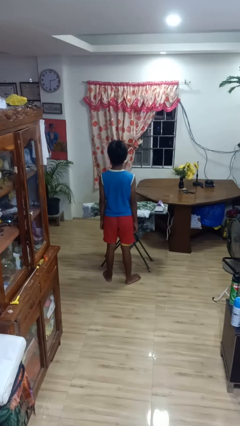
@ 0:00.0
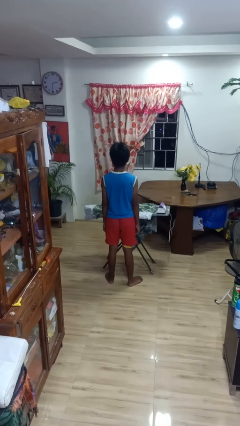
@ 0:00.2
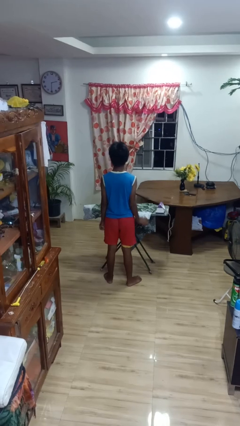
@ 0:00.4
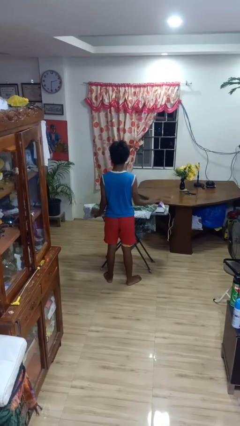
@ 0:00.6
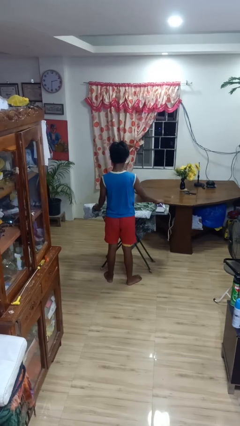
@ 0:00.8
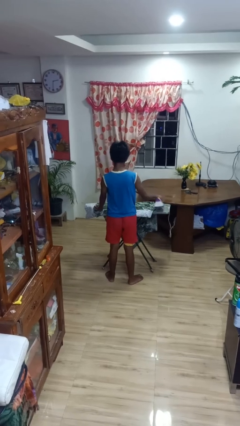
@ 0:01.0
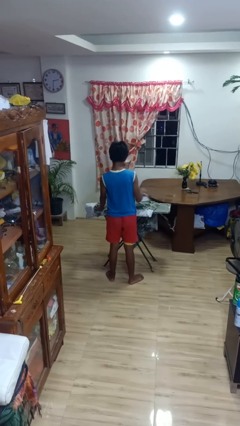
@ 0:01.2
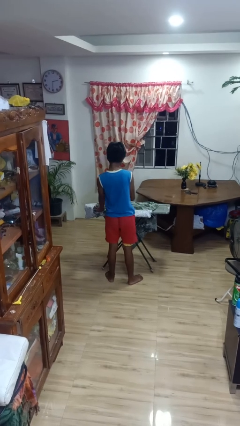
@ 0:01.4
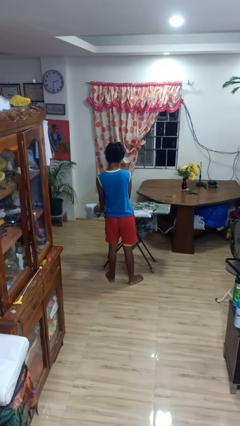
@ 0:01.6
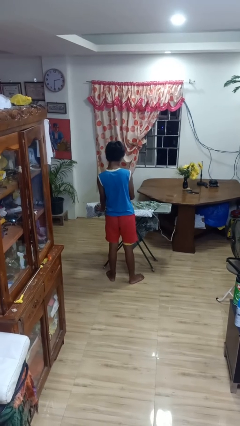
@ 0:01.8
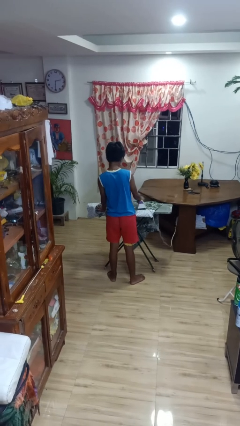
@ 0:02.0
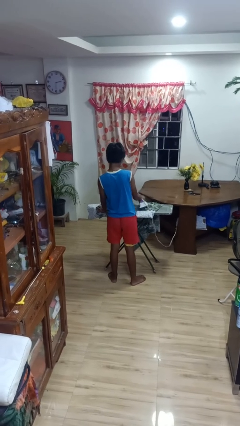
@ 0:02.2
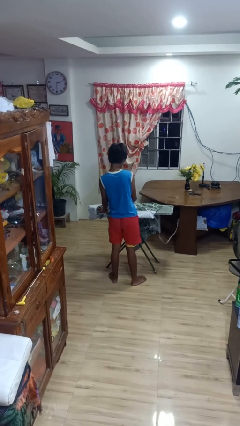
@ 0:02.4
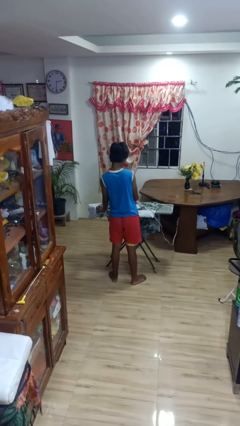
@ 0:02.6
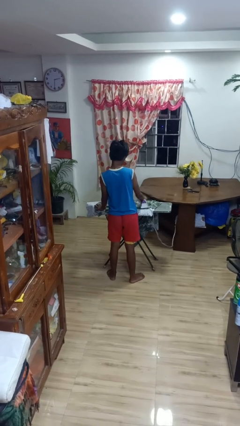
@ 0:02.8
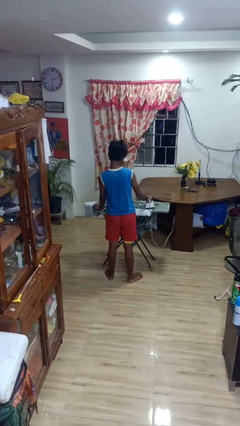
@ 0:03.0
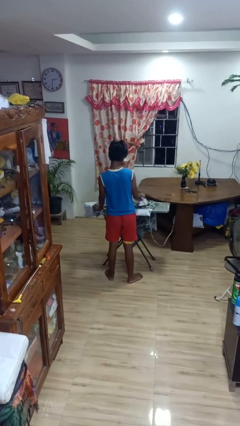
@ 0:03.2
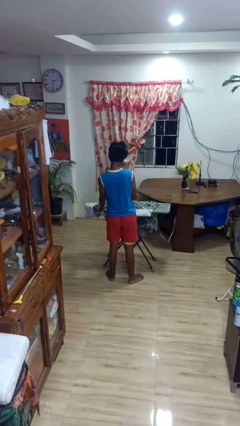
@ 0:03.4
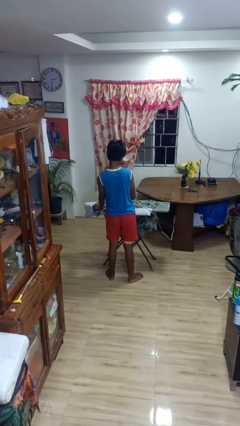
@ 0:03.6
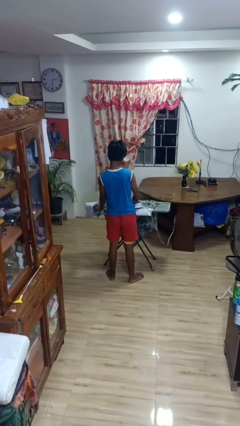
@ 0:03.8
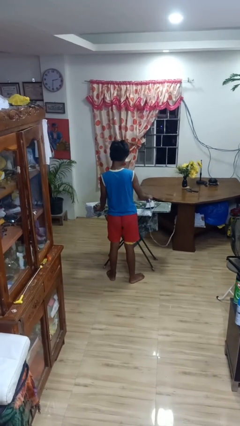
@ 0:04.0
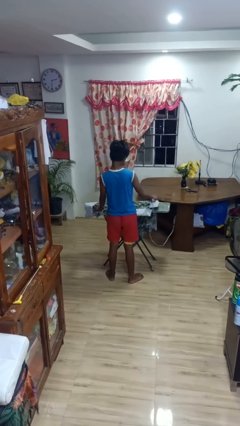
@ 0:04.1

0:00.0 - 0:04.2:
person irons clothes

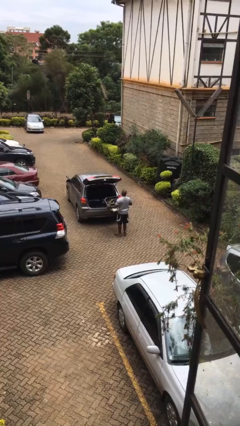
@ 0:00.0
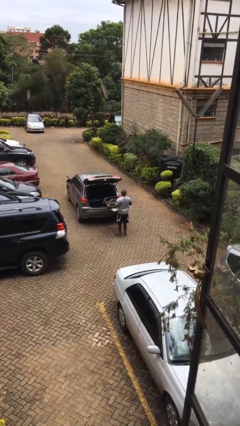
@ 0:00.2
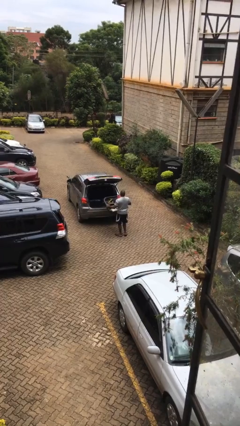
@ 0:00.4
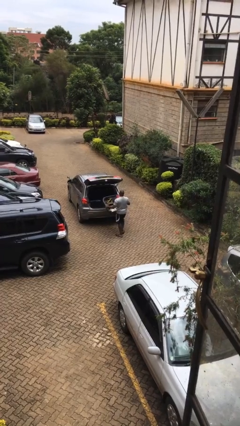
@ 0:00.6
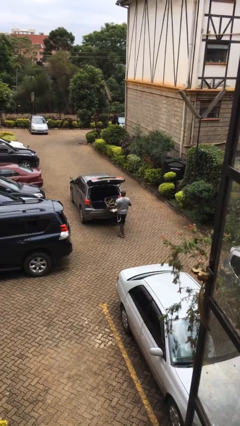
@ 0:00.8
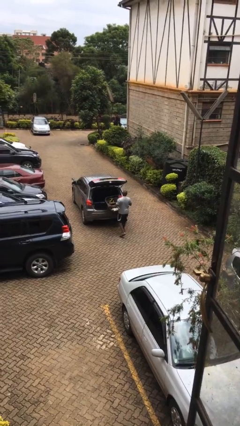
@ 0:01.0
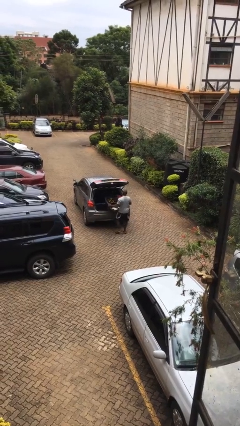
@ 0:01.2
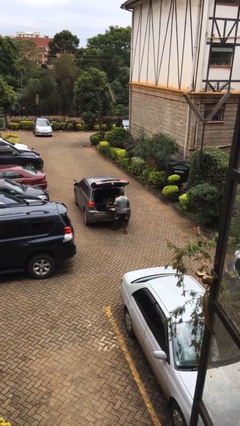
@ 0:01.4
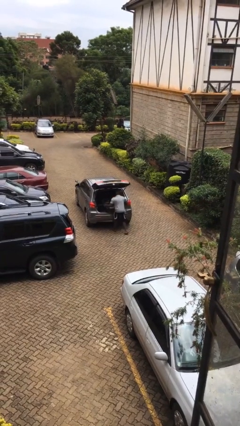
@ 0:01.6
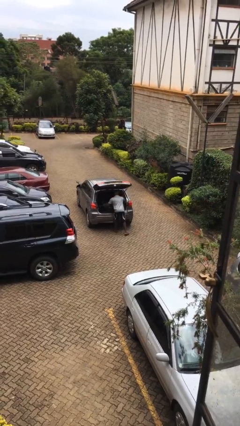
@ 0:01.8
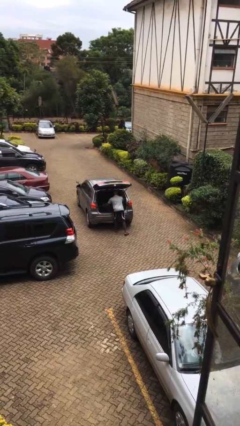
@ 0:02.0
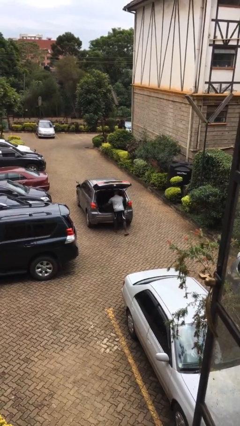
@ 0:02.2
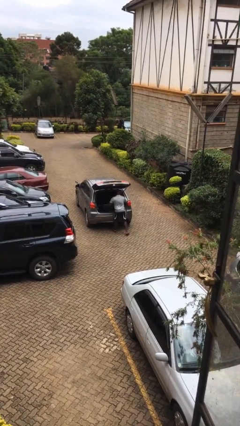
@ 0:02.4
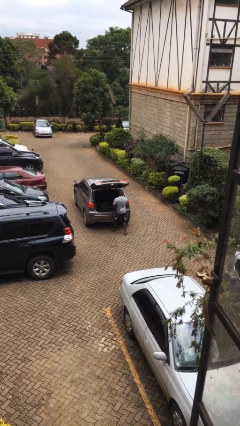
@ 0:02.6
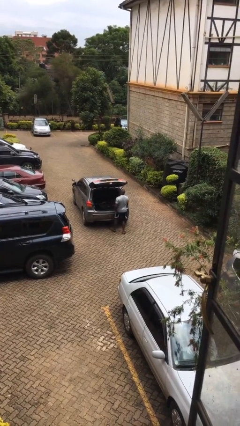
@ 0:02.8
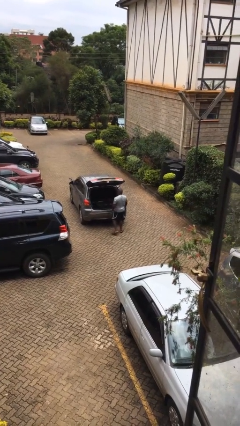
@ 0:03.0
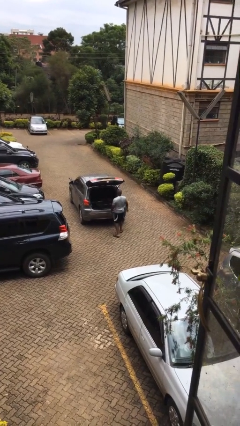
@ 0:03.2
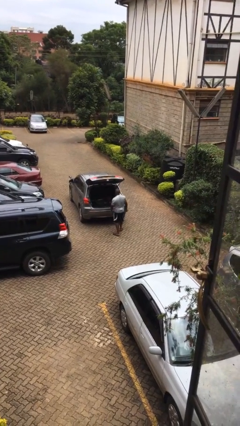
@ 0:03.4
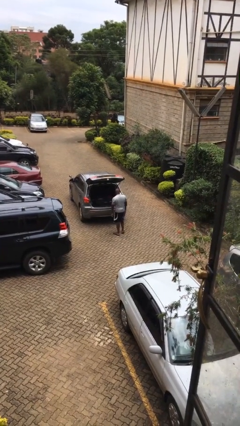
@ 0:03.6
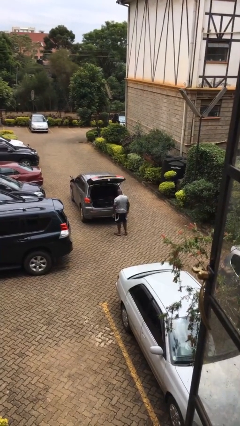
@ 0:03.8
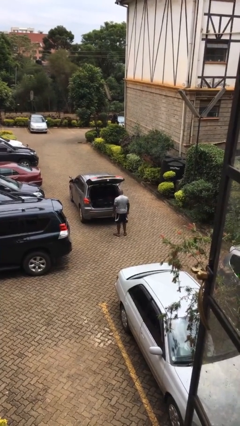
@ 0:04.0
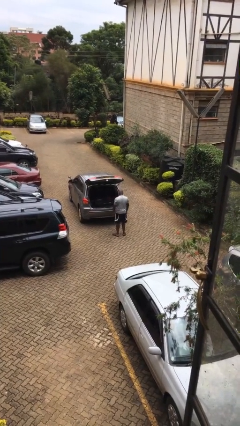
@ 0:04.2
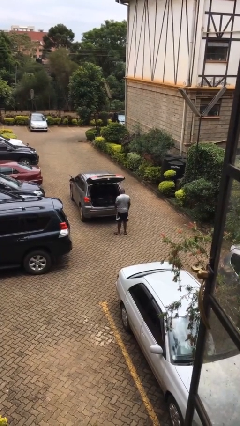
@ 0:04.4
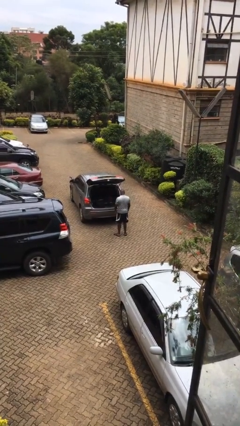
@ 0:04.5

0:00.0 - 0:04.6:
person loads car

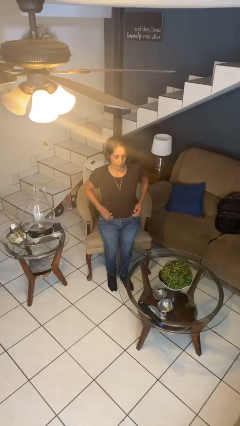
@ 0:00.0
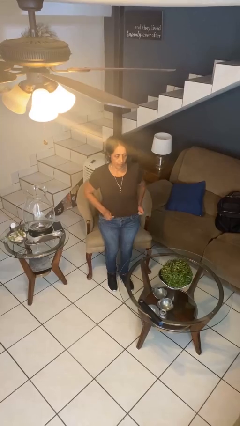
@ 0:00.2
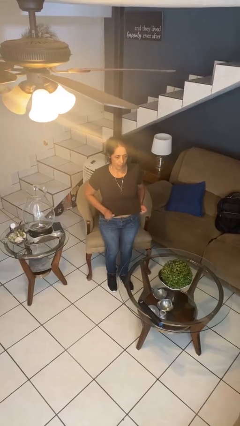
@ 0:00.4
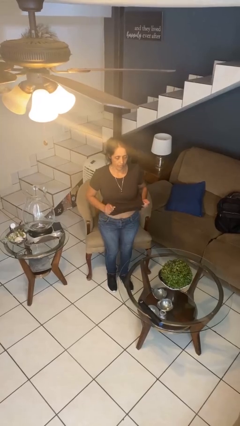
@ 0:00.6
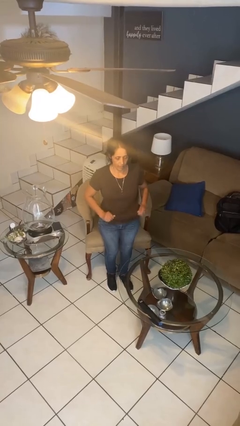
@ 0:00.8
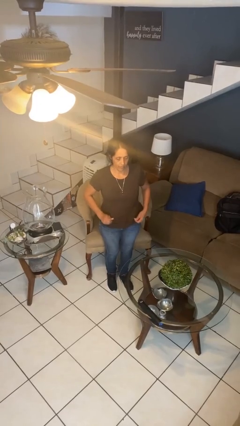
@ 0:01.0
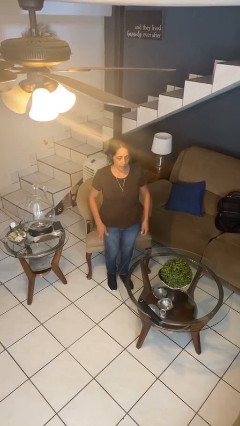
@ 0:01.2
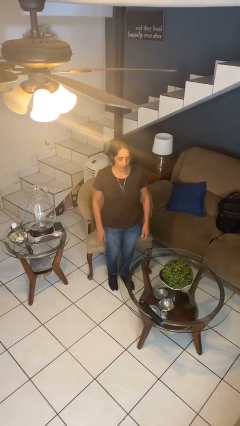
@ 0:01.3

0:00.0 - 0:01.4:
person untucks shirt

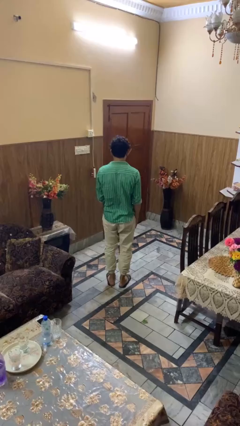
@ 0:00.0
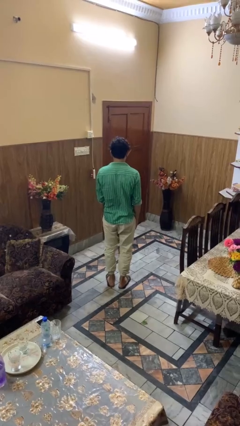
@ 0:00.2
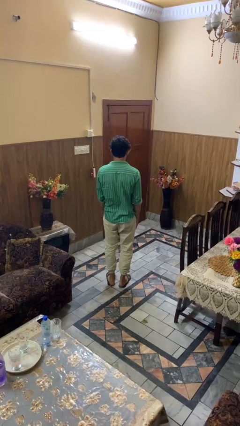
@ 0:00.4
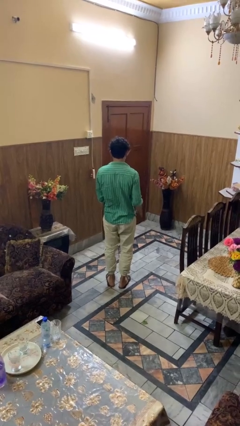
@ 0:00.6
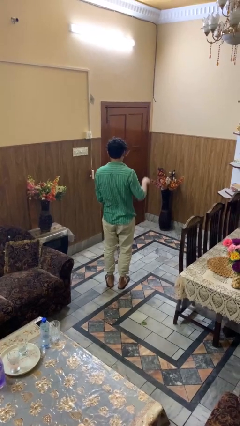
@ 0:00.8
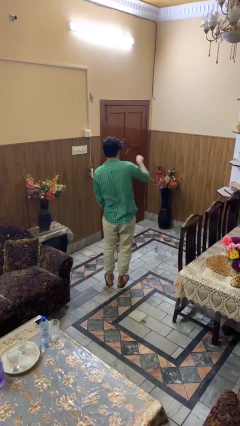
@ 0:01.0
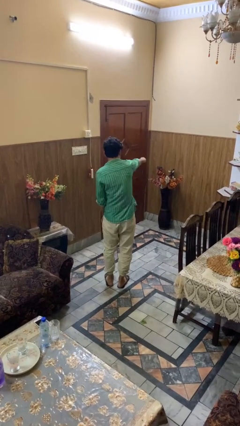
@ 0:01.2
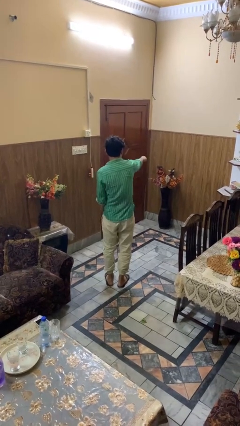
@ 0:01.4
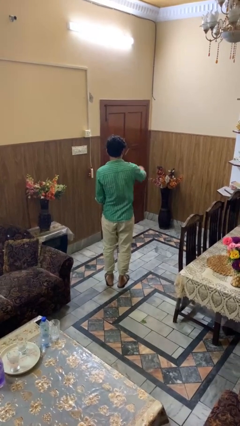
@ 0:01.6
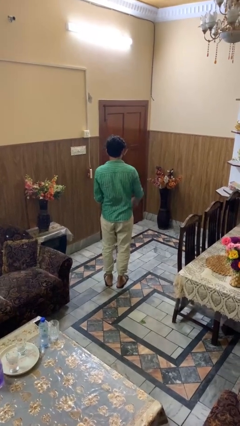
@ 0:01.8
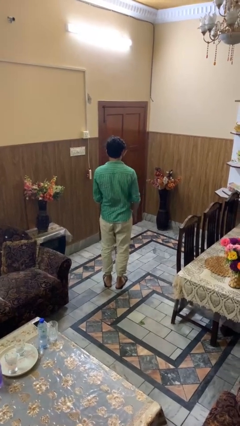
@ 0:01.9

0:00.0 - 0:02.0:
person karate chop

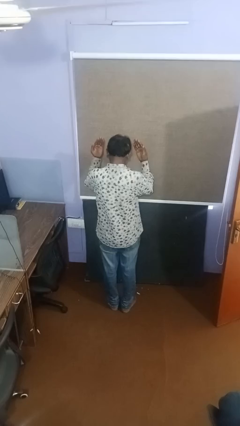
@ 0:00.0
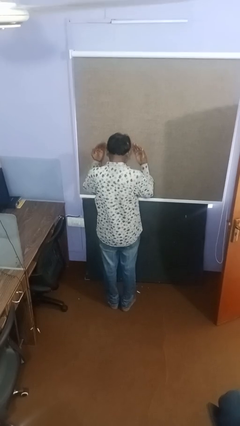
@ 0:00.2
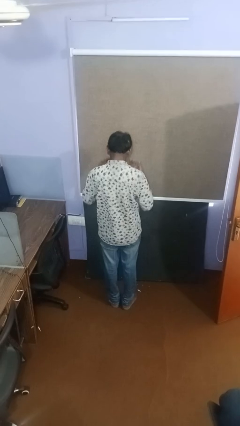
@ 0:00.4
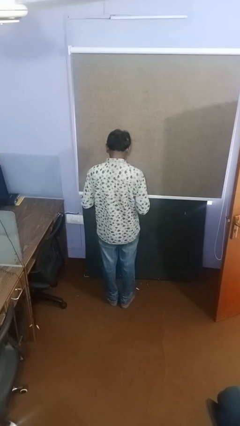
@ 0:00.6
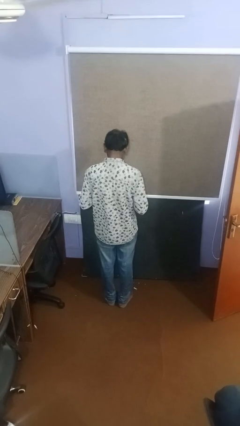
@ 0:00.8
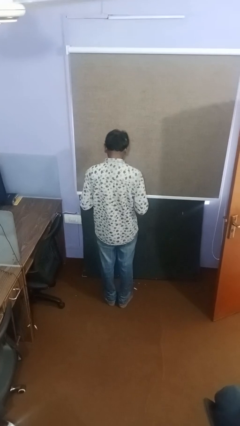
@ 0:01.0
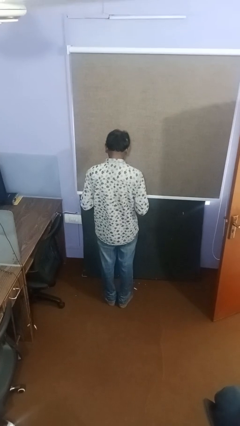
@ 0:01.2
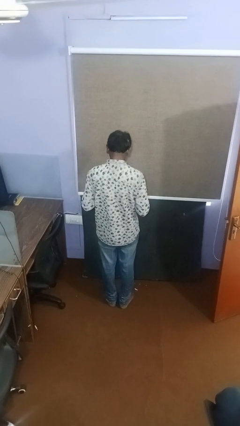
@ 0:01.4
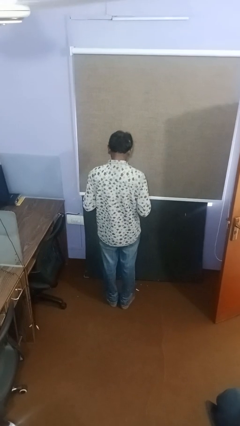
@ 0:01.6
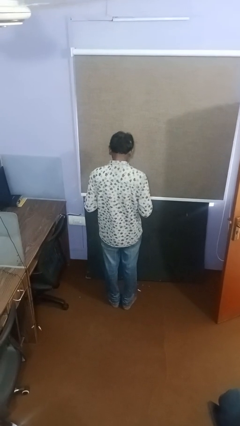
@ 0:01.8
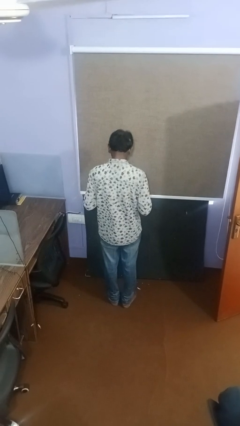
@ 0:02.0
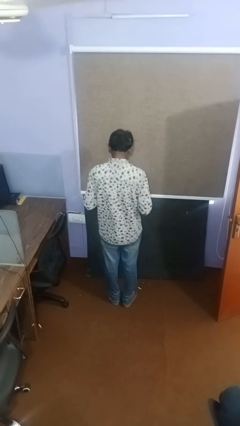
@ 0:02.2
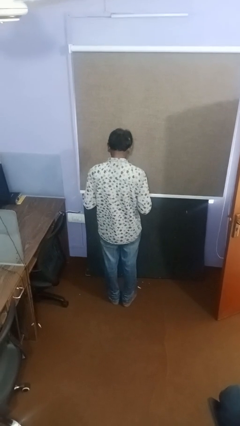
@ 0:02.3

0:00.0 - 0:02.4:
person gestures swipe down

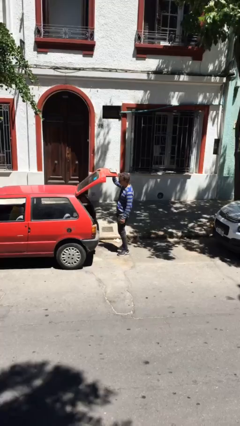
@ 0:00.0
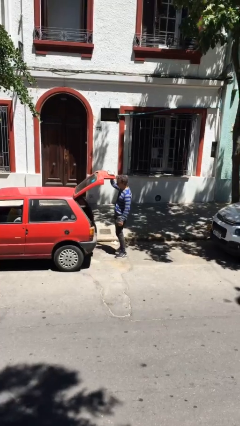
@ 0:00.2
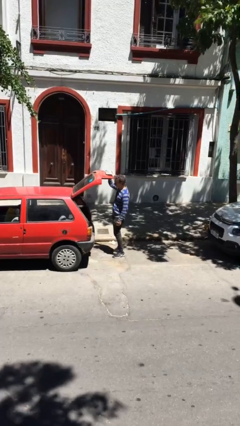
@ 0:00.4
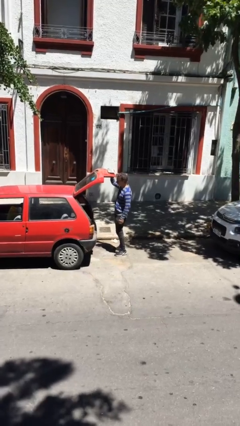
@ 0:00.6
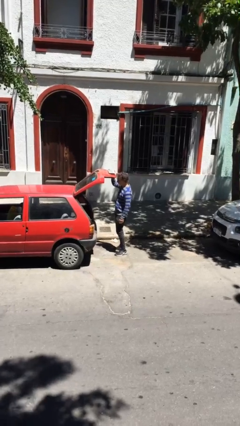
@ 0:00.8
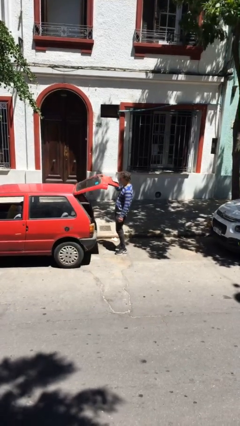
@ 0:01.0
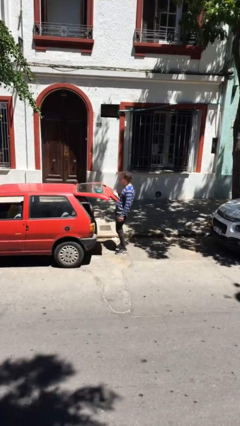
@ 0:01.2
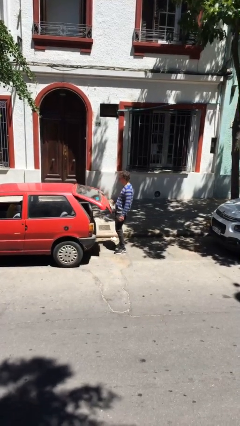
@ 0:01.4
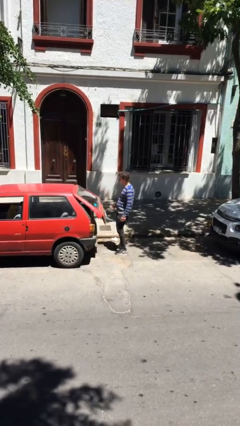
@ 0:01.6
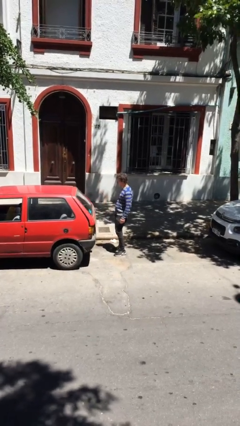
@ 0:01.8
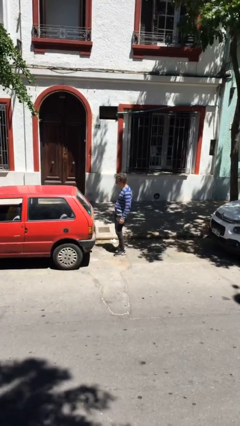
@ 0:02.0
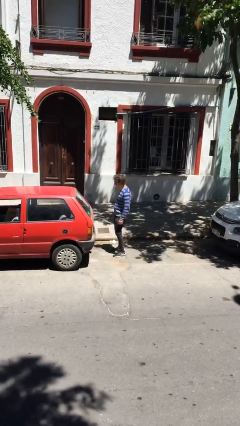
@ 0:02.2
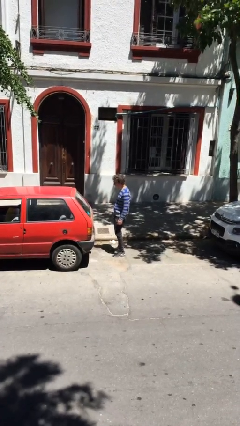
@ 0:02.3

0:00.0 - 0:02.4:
person closes car trunk

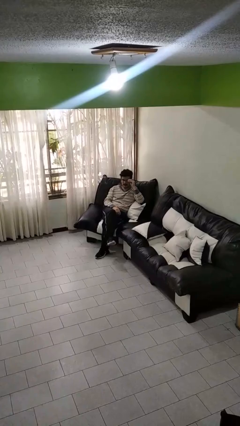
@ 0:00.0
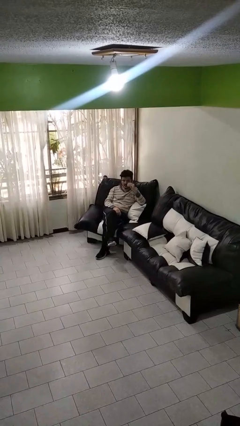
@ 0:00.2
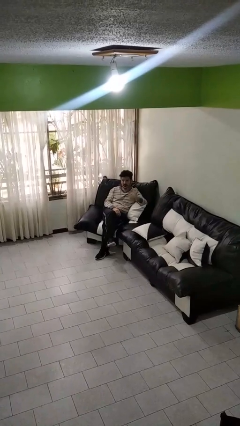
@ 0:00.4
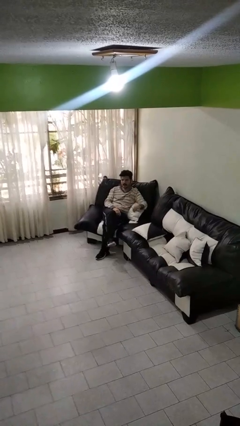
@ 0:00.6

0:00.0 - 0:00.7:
person takes off glasses
